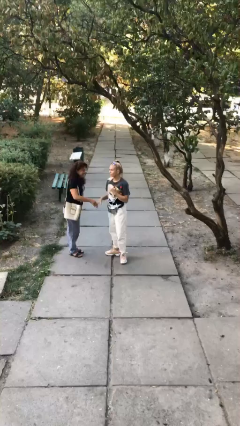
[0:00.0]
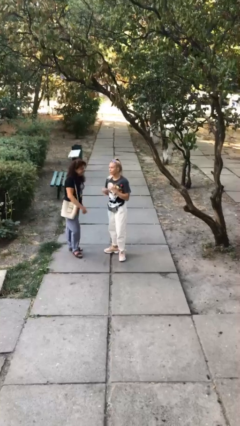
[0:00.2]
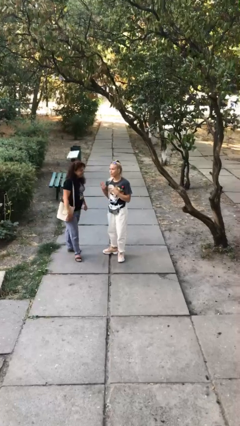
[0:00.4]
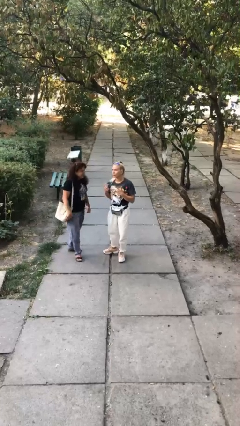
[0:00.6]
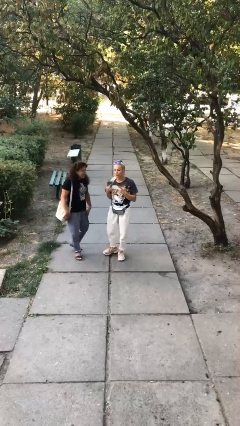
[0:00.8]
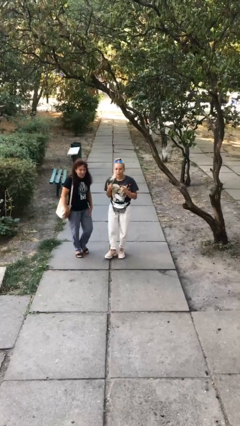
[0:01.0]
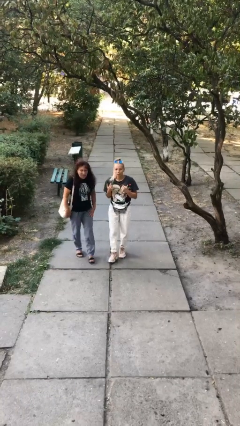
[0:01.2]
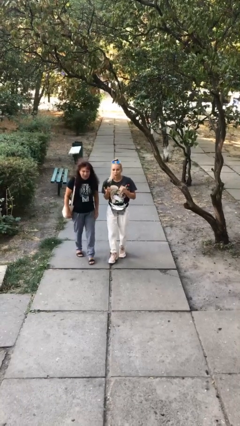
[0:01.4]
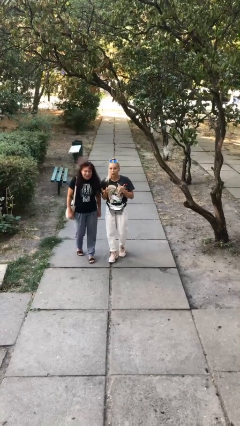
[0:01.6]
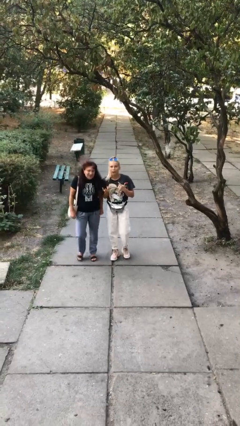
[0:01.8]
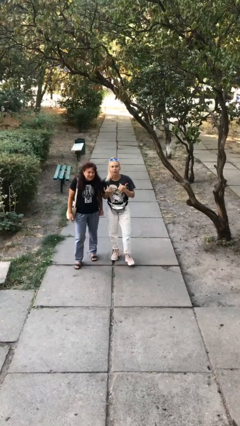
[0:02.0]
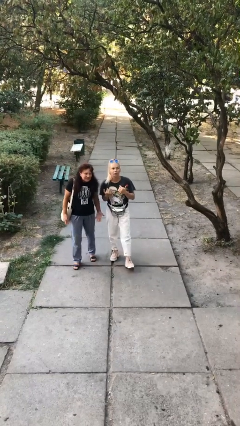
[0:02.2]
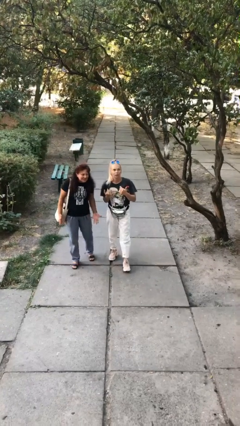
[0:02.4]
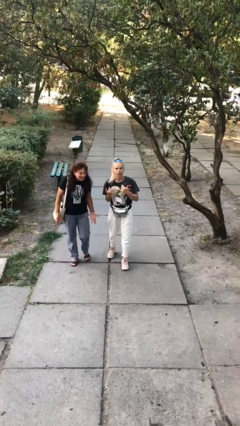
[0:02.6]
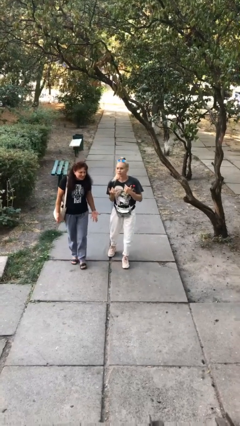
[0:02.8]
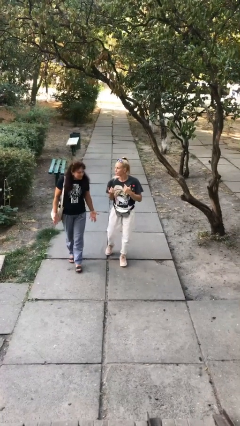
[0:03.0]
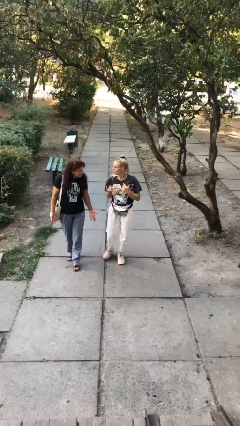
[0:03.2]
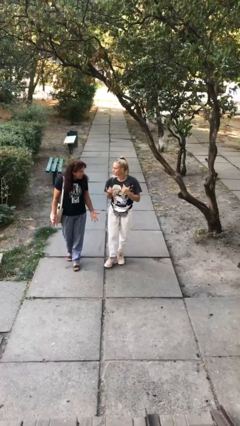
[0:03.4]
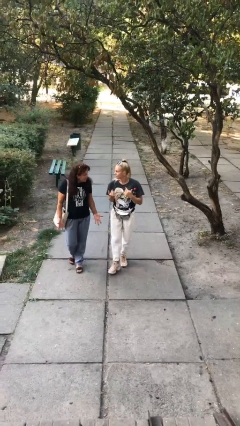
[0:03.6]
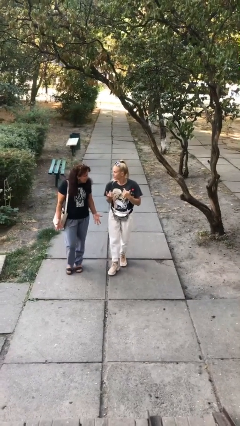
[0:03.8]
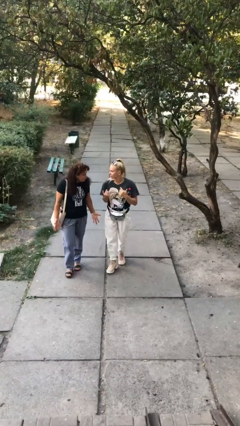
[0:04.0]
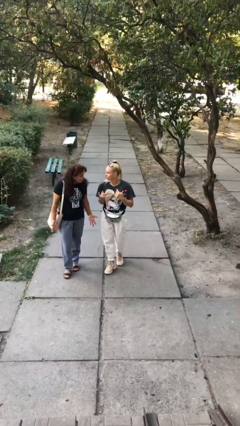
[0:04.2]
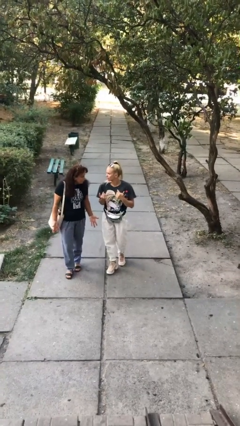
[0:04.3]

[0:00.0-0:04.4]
person talks to person

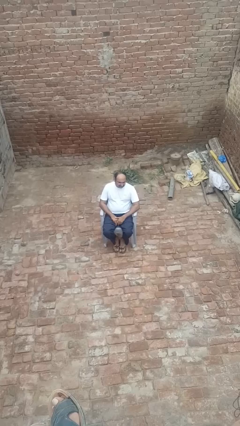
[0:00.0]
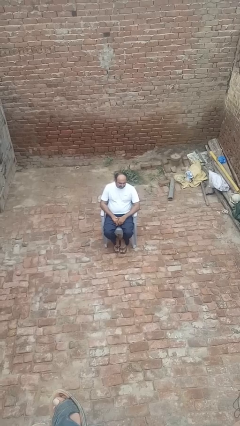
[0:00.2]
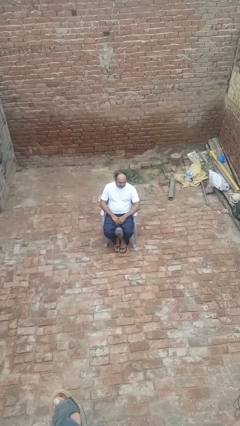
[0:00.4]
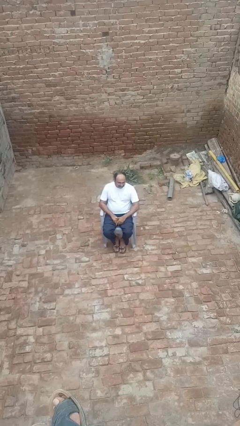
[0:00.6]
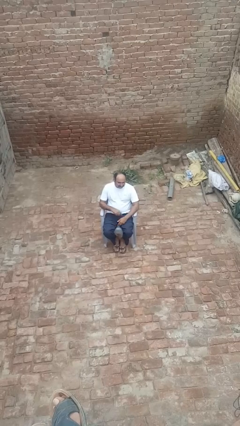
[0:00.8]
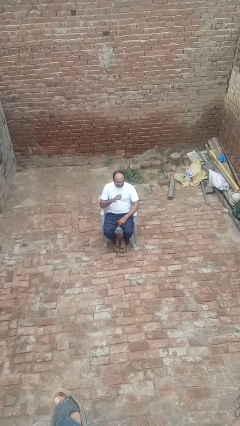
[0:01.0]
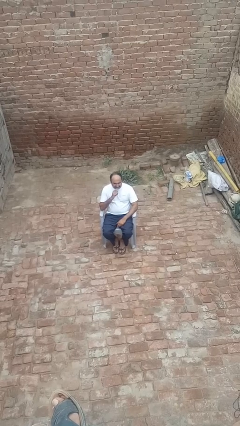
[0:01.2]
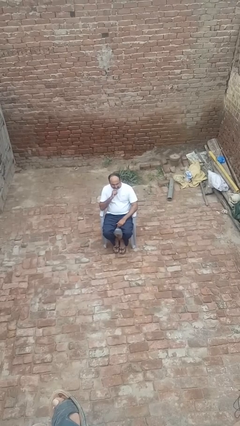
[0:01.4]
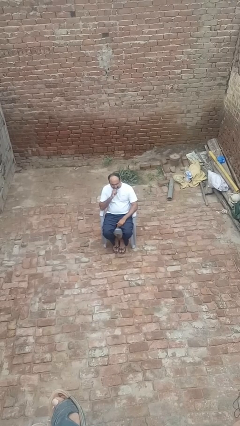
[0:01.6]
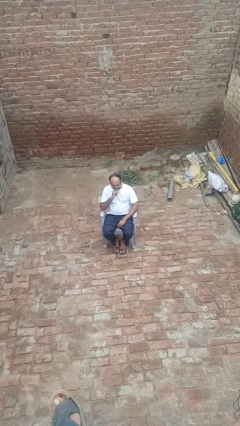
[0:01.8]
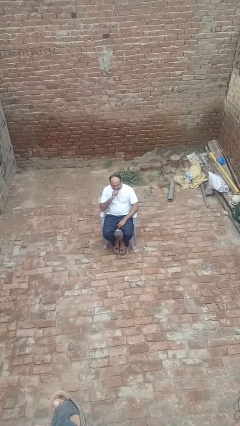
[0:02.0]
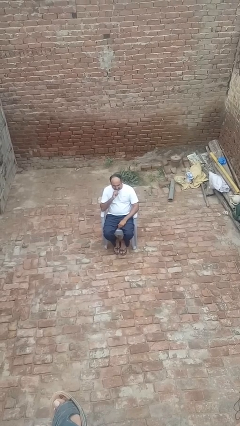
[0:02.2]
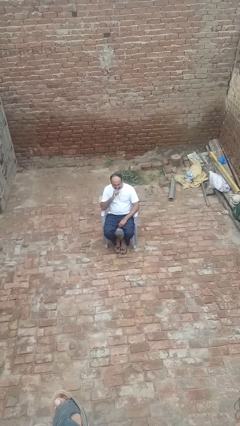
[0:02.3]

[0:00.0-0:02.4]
person strokes chin

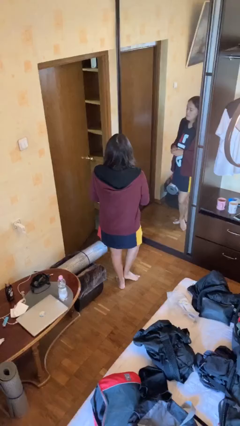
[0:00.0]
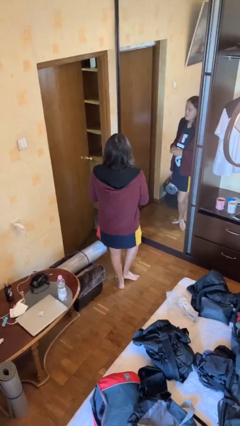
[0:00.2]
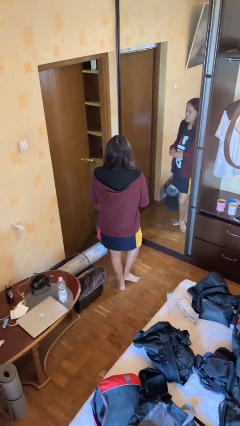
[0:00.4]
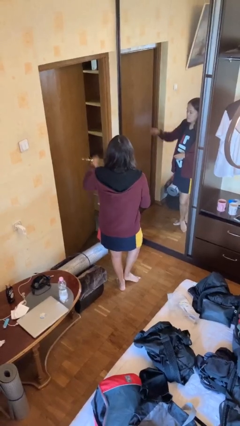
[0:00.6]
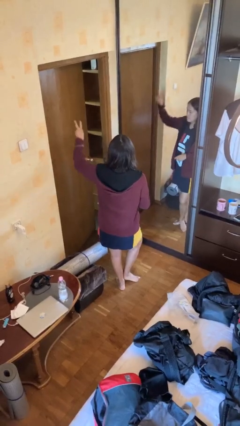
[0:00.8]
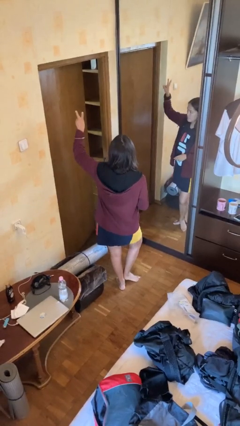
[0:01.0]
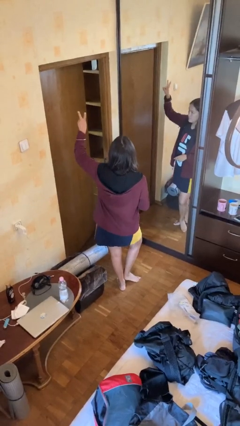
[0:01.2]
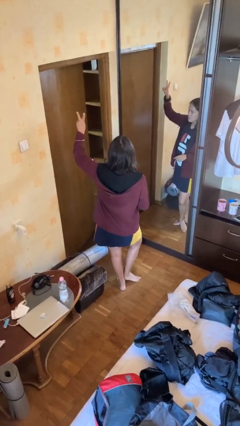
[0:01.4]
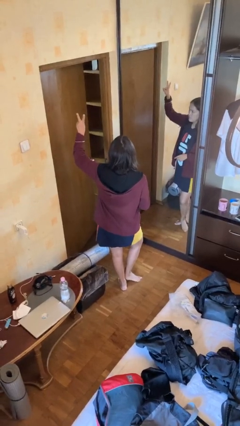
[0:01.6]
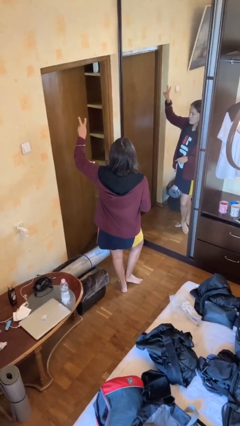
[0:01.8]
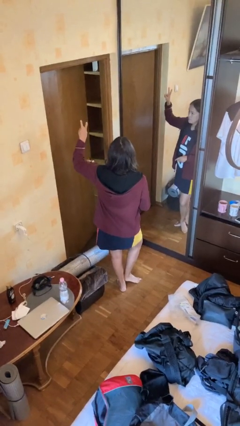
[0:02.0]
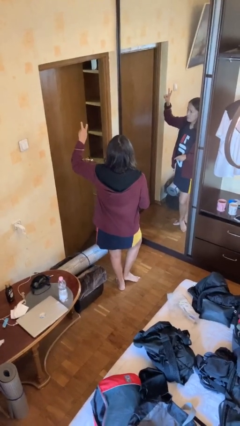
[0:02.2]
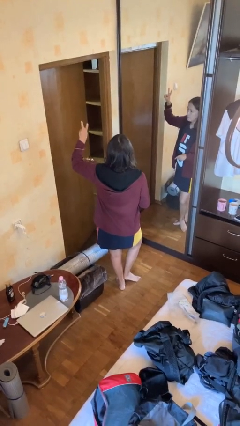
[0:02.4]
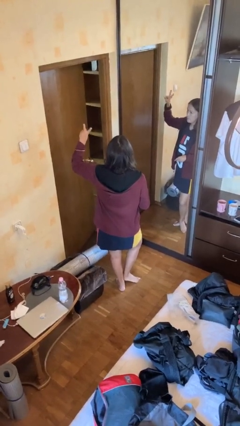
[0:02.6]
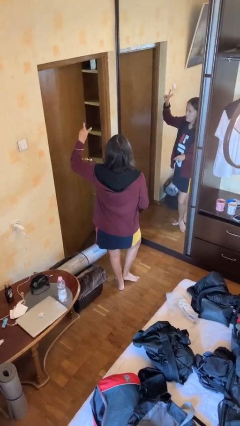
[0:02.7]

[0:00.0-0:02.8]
person gestures peace

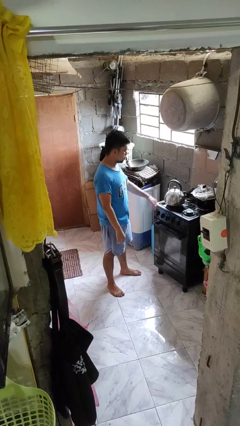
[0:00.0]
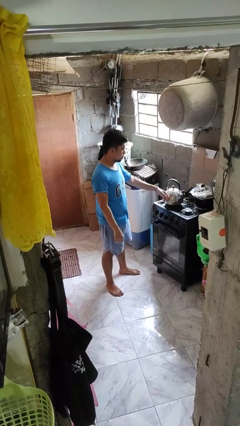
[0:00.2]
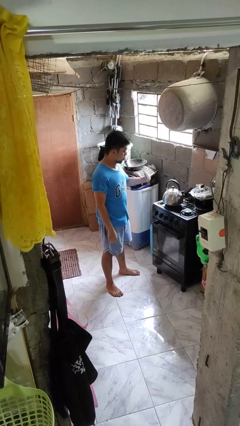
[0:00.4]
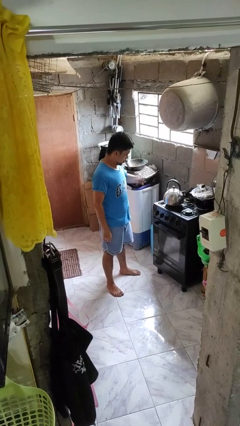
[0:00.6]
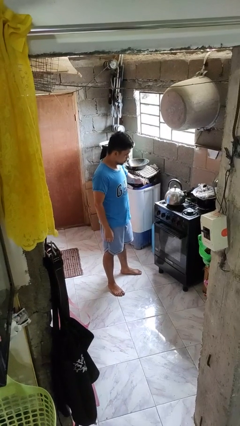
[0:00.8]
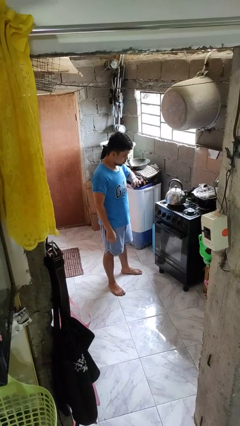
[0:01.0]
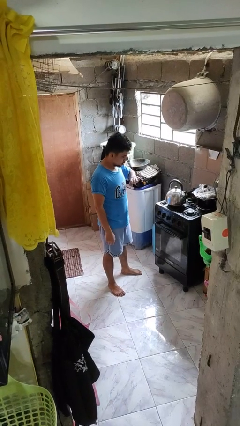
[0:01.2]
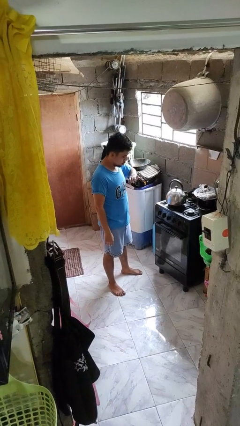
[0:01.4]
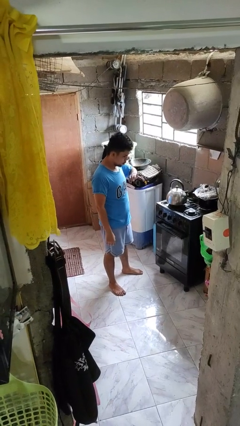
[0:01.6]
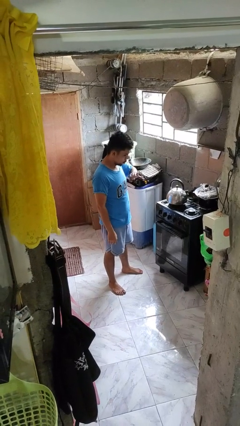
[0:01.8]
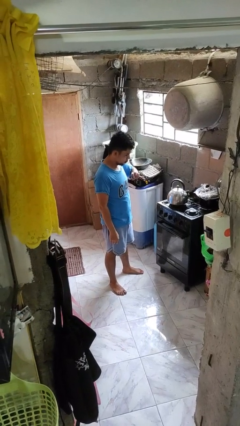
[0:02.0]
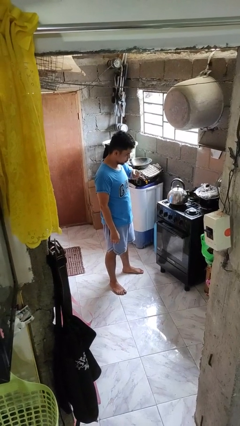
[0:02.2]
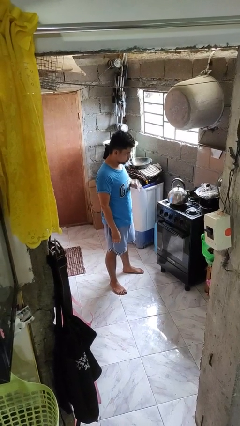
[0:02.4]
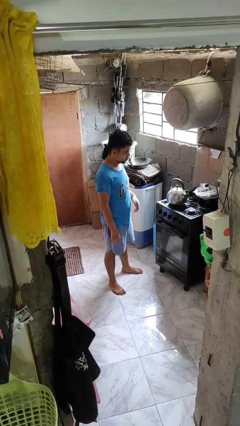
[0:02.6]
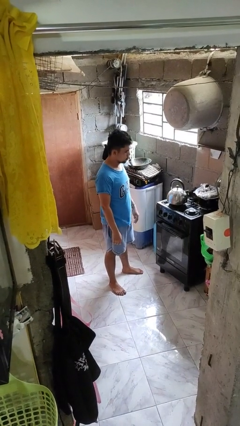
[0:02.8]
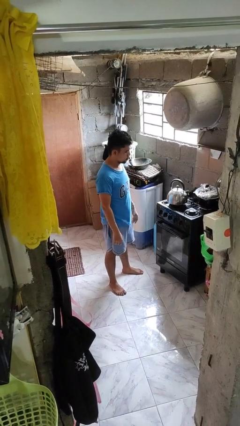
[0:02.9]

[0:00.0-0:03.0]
person burns hand

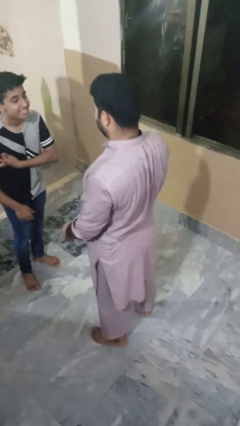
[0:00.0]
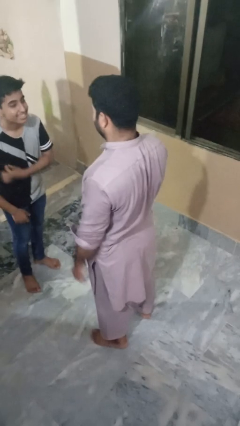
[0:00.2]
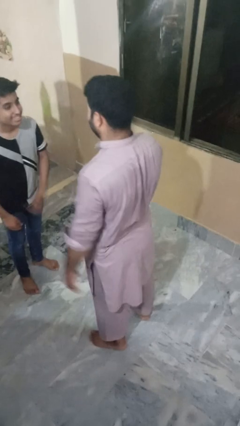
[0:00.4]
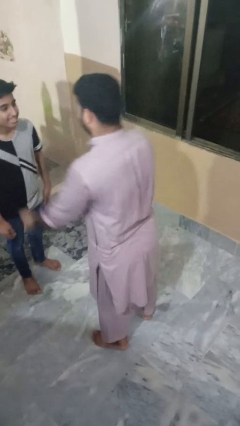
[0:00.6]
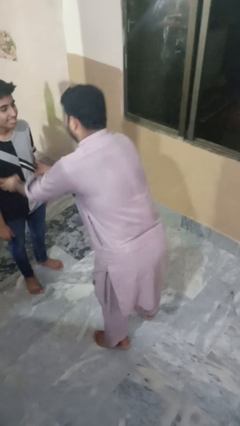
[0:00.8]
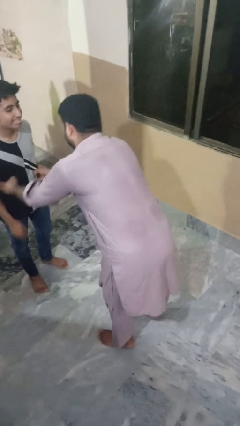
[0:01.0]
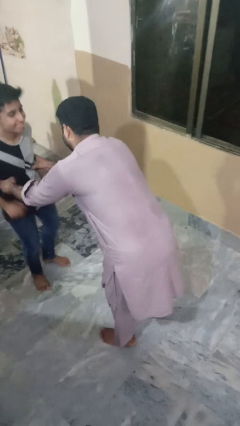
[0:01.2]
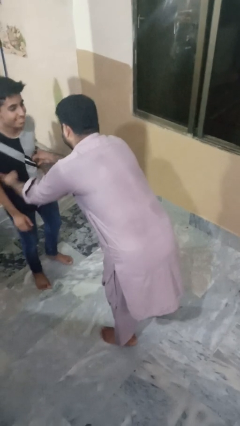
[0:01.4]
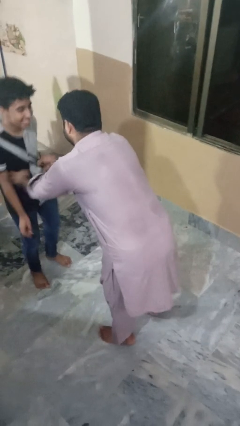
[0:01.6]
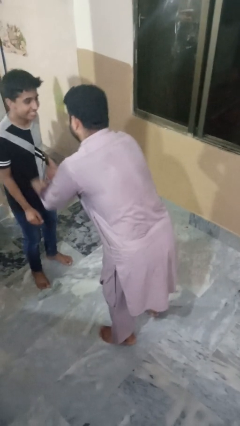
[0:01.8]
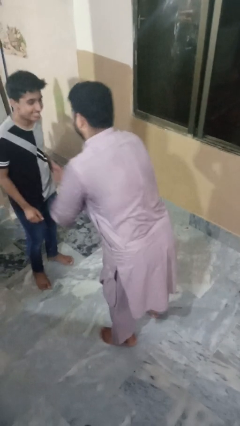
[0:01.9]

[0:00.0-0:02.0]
person tickles person

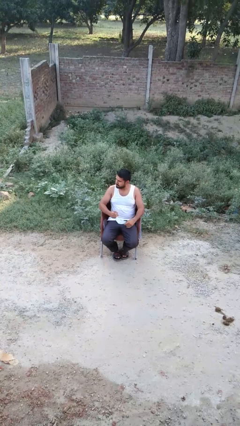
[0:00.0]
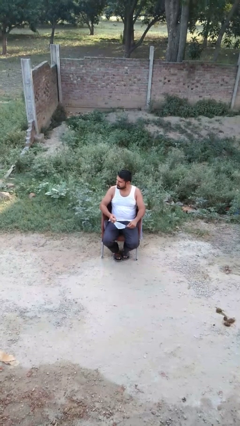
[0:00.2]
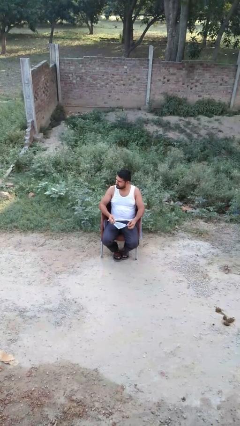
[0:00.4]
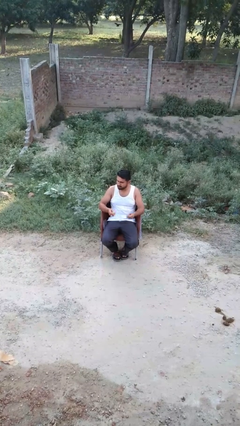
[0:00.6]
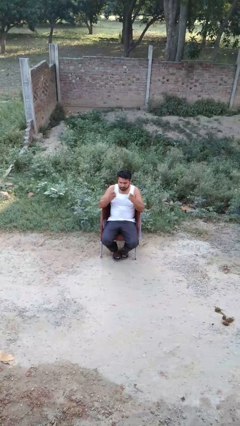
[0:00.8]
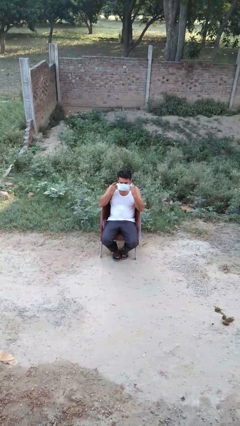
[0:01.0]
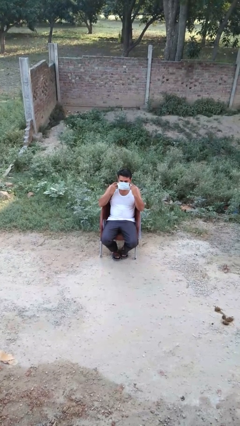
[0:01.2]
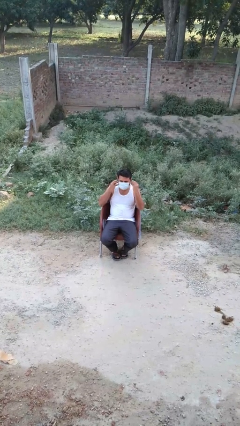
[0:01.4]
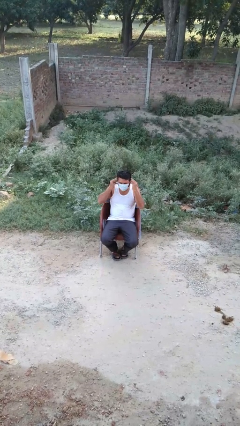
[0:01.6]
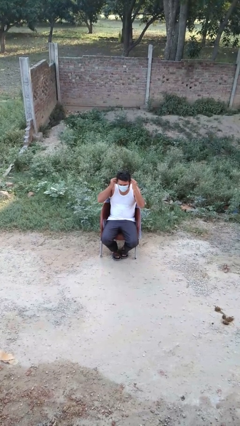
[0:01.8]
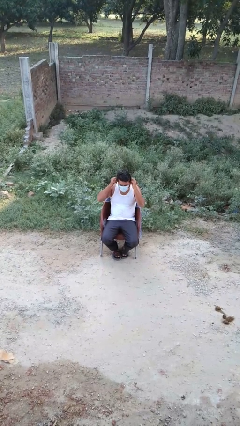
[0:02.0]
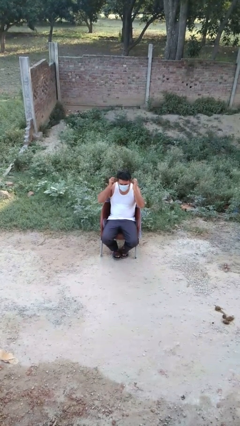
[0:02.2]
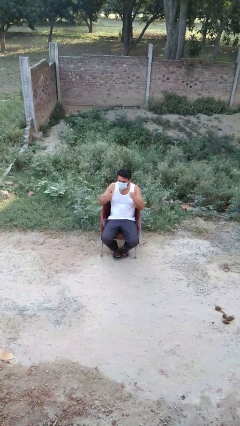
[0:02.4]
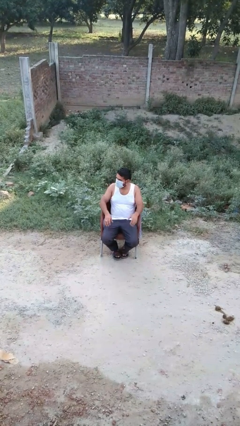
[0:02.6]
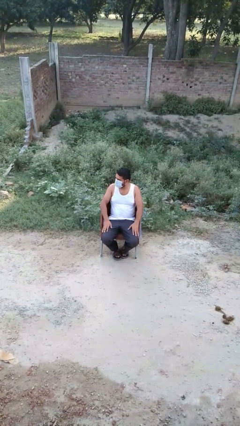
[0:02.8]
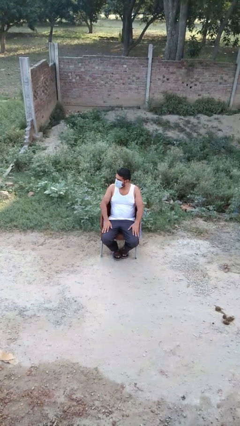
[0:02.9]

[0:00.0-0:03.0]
person puts on facemask
